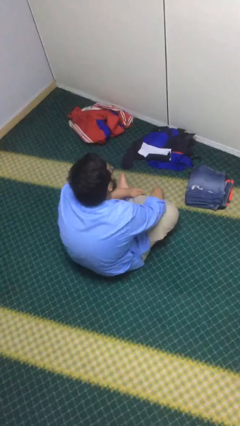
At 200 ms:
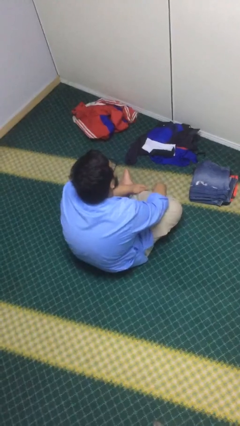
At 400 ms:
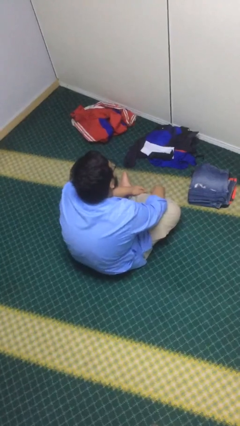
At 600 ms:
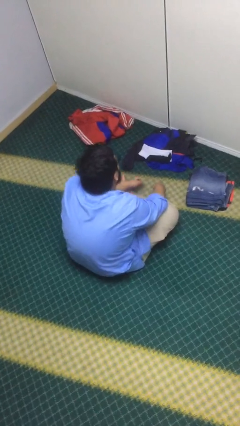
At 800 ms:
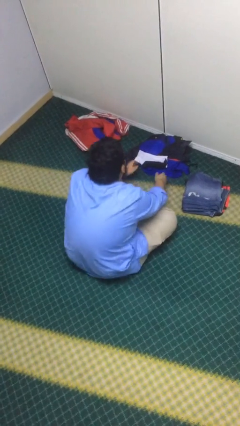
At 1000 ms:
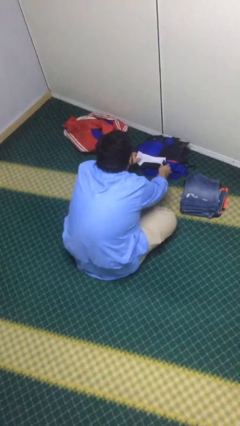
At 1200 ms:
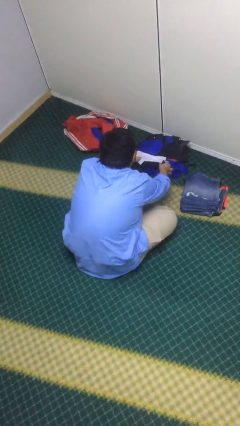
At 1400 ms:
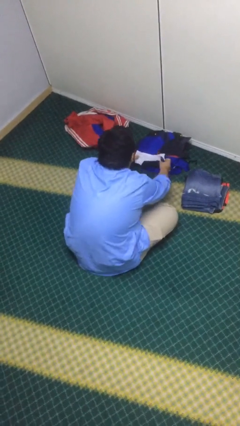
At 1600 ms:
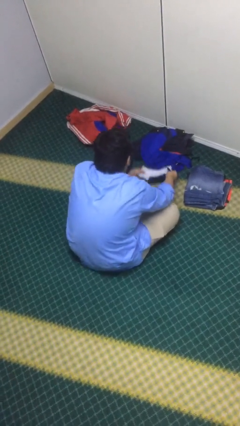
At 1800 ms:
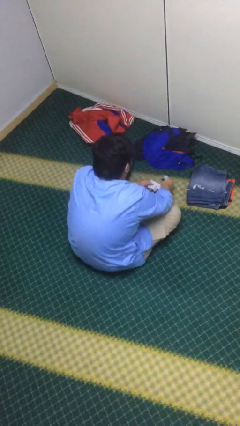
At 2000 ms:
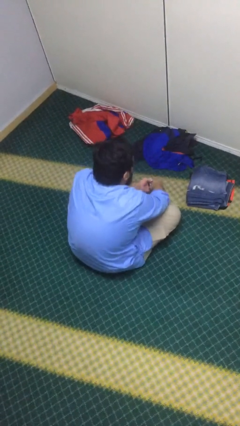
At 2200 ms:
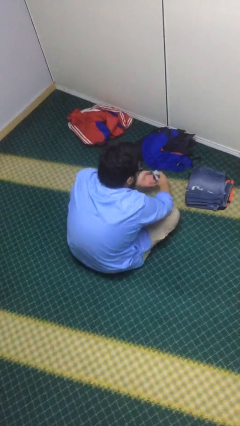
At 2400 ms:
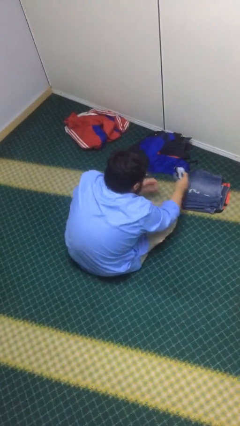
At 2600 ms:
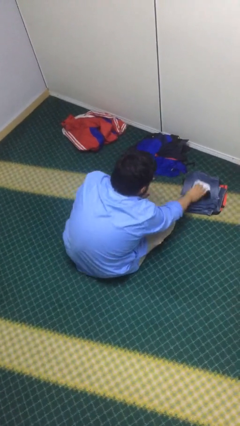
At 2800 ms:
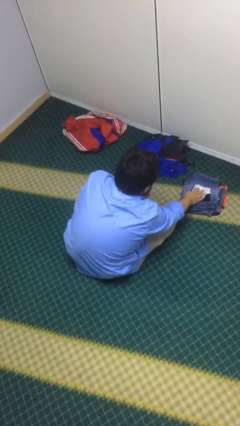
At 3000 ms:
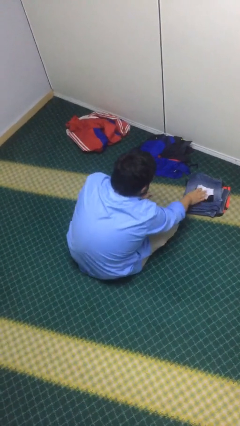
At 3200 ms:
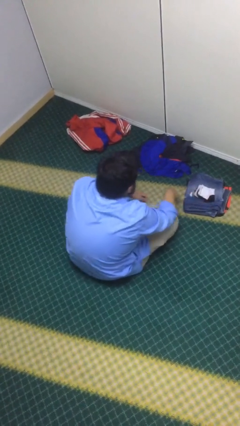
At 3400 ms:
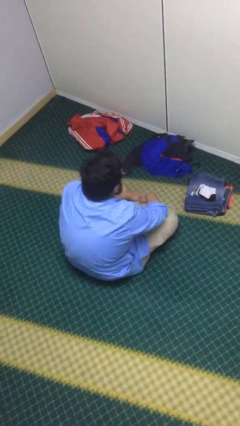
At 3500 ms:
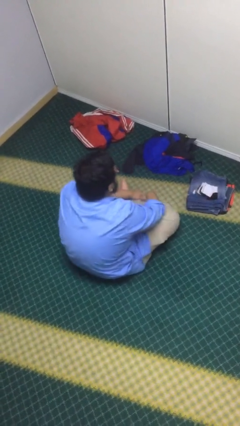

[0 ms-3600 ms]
person folds socks

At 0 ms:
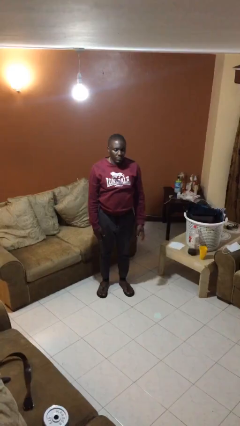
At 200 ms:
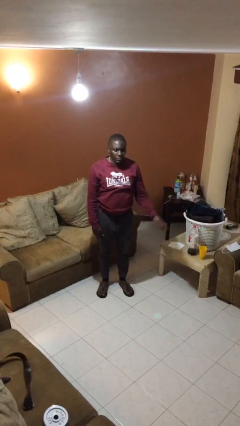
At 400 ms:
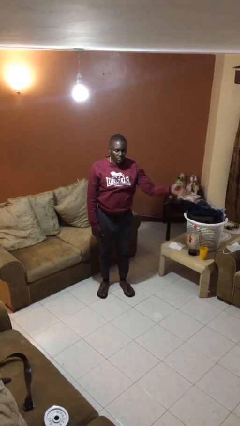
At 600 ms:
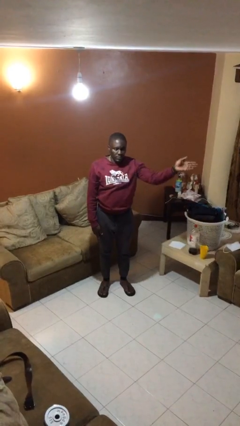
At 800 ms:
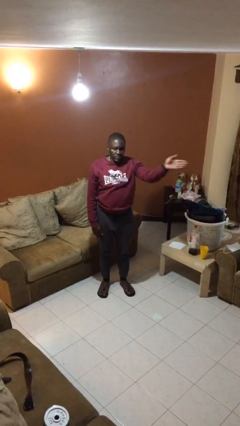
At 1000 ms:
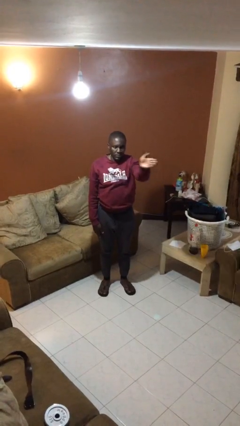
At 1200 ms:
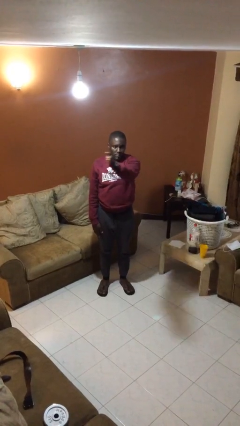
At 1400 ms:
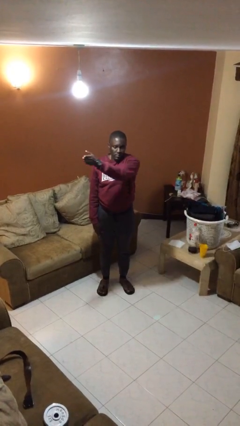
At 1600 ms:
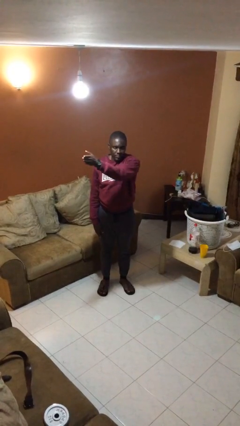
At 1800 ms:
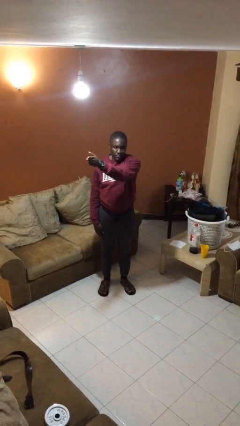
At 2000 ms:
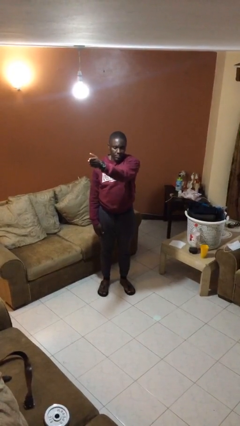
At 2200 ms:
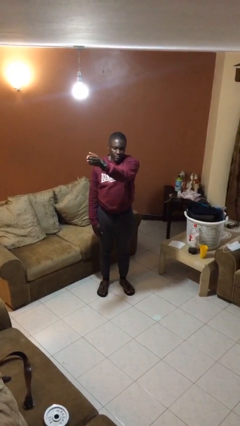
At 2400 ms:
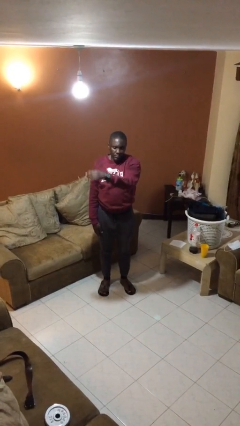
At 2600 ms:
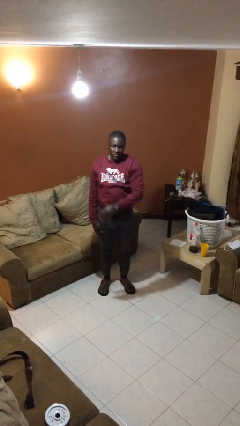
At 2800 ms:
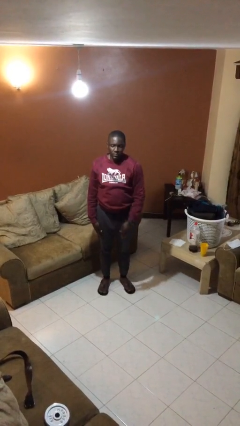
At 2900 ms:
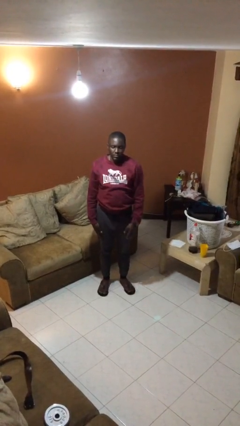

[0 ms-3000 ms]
person gestures swipe right

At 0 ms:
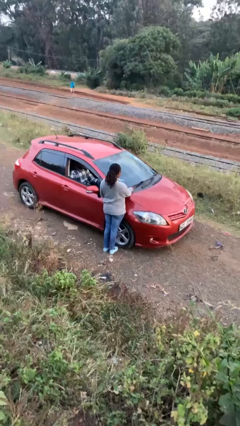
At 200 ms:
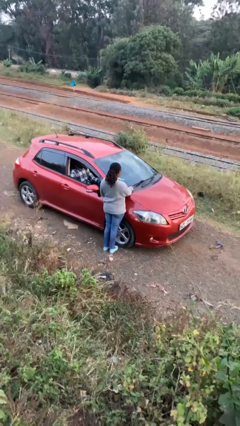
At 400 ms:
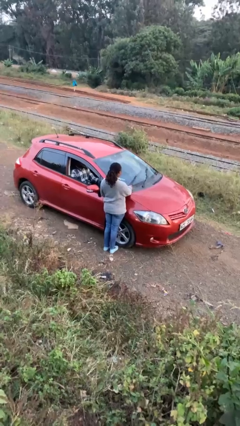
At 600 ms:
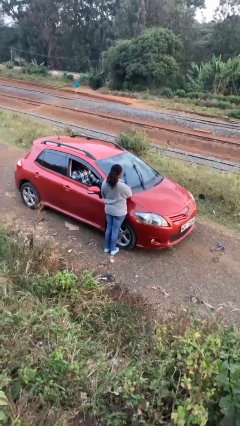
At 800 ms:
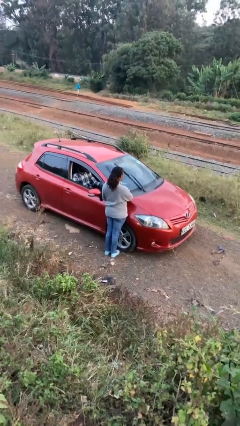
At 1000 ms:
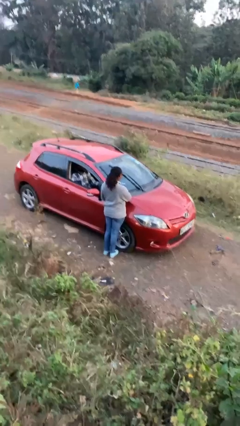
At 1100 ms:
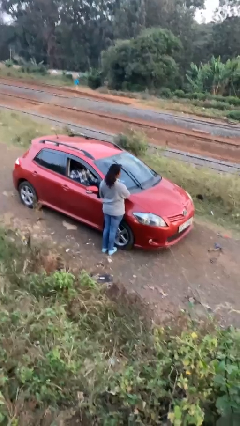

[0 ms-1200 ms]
person flips up car wipers

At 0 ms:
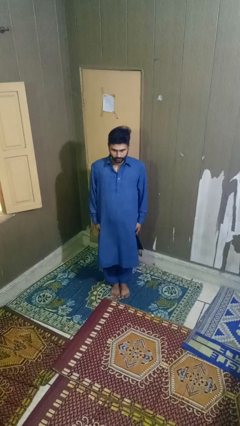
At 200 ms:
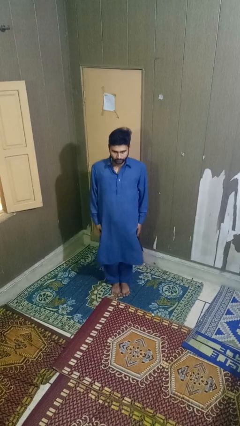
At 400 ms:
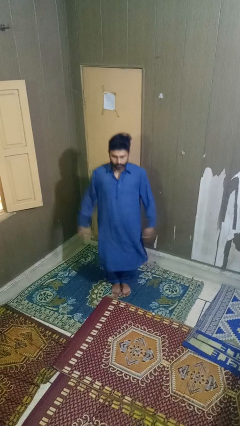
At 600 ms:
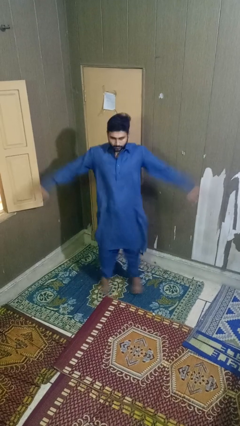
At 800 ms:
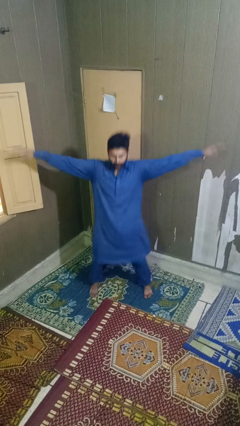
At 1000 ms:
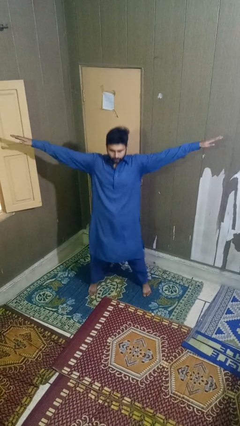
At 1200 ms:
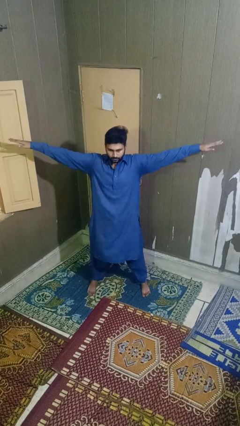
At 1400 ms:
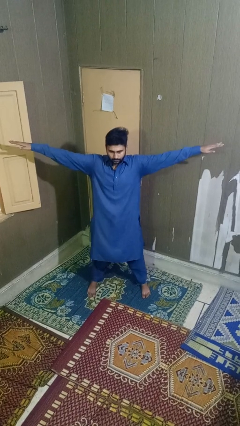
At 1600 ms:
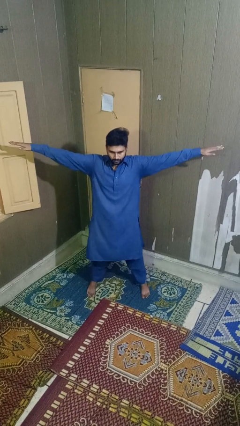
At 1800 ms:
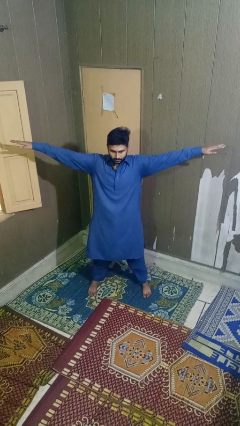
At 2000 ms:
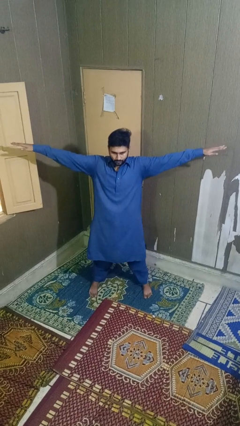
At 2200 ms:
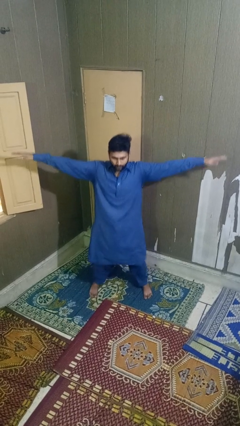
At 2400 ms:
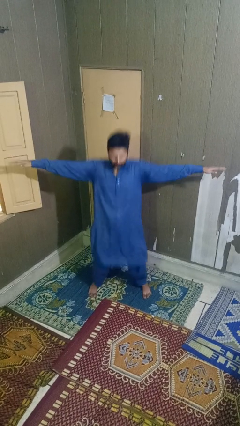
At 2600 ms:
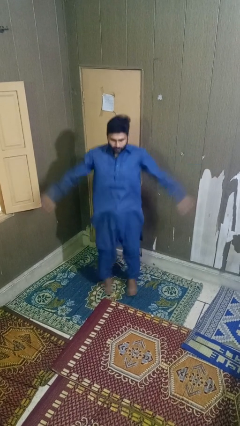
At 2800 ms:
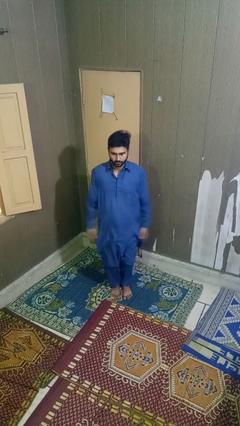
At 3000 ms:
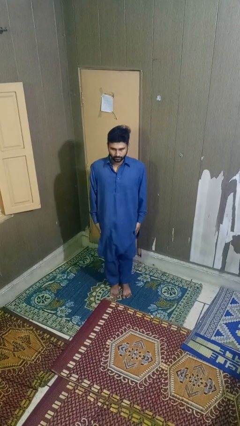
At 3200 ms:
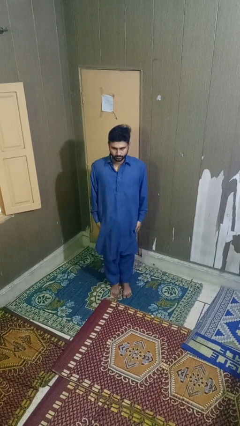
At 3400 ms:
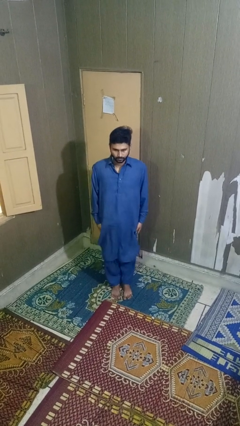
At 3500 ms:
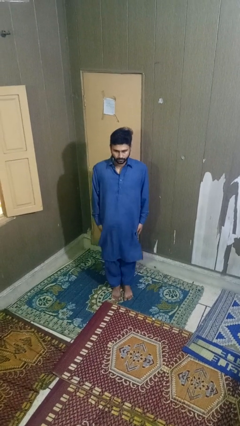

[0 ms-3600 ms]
person exercises with jumping jacks

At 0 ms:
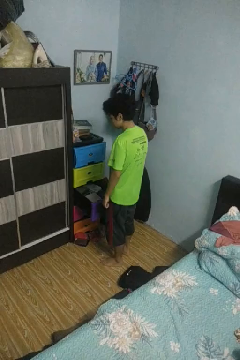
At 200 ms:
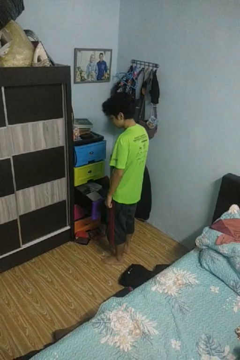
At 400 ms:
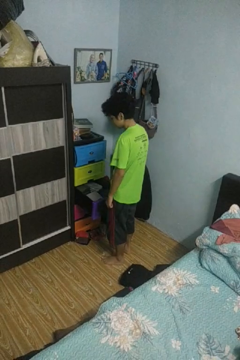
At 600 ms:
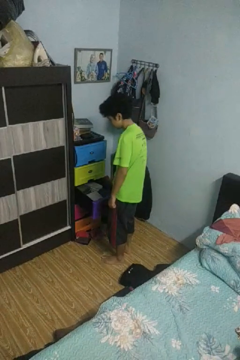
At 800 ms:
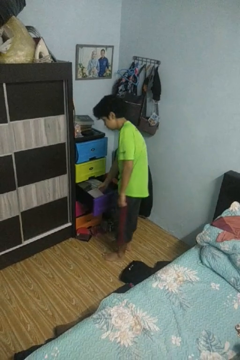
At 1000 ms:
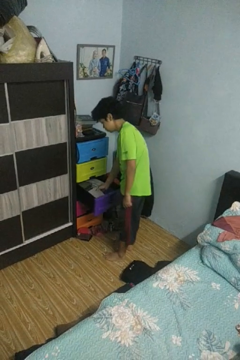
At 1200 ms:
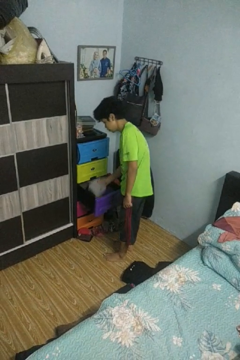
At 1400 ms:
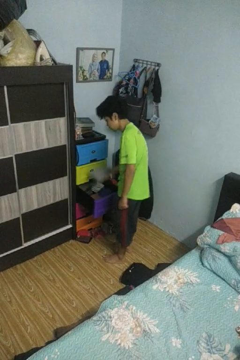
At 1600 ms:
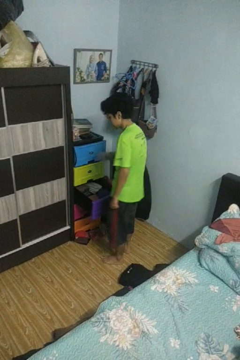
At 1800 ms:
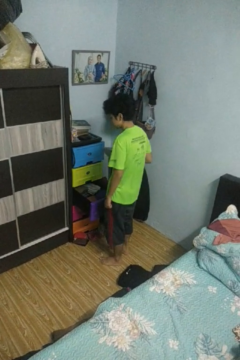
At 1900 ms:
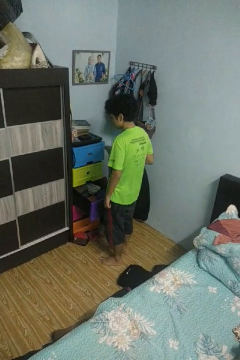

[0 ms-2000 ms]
person takes clothes from dresser

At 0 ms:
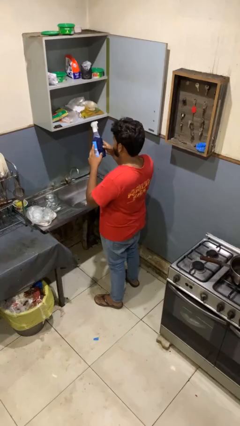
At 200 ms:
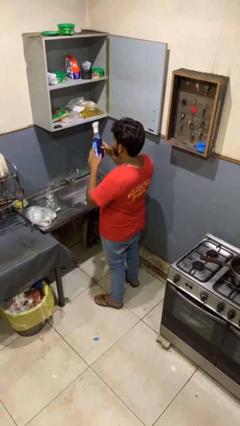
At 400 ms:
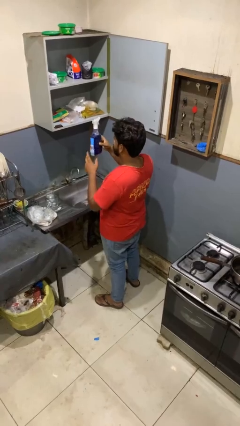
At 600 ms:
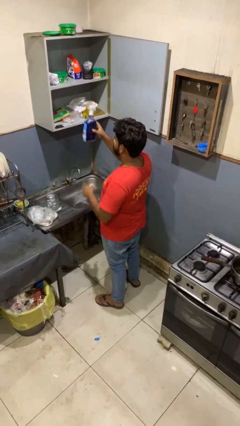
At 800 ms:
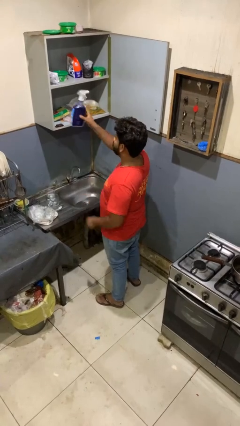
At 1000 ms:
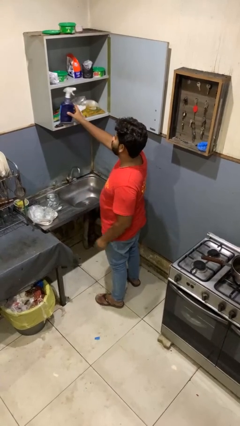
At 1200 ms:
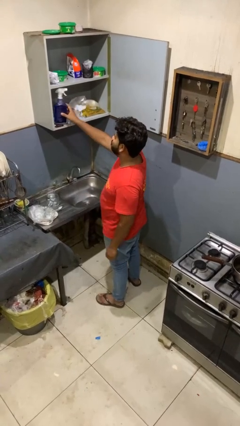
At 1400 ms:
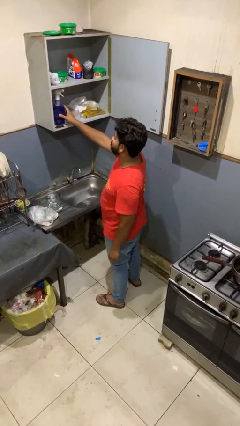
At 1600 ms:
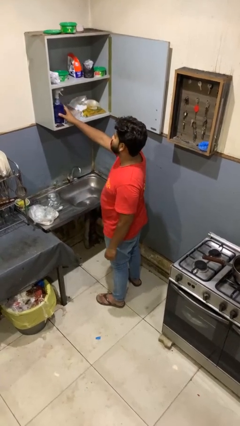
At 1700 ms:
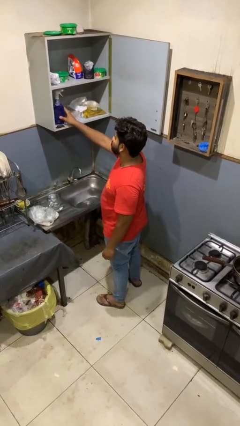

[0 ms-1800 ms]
person puts down object into cabinet

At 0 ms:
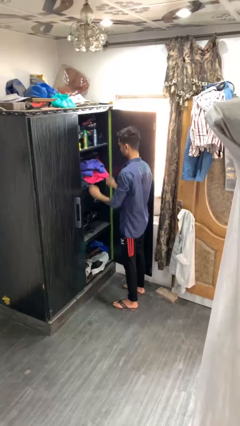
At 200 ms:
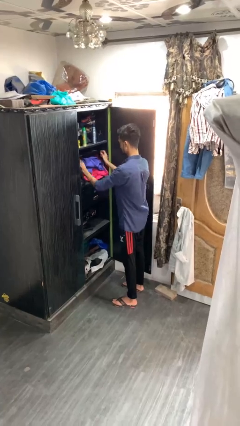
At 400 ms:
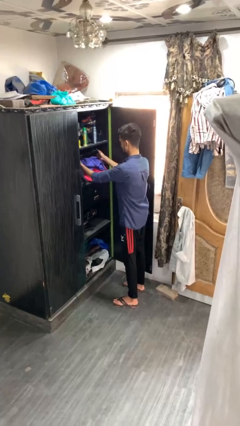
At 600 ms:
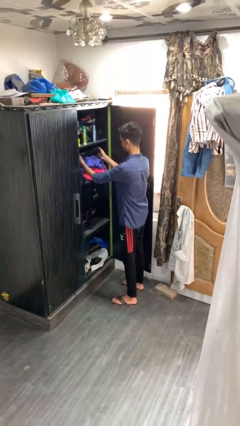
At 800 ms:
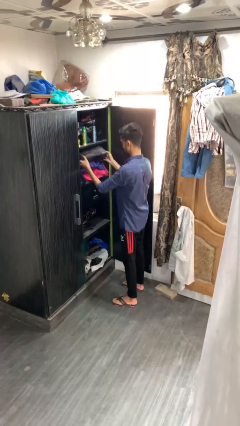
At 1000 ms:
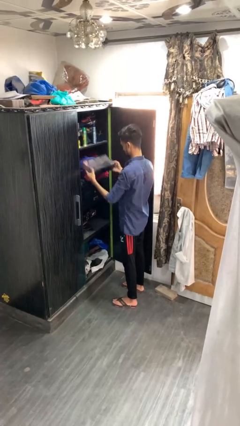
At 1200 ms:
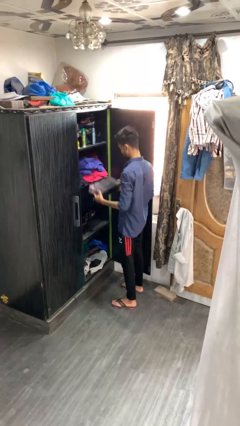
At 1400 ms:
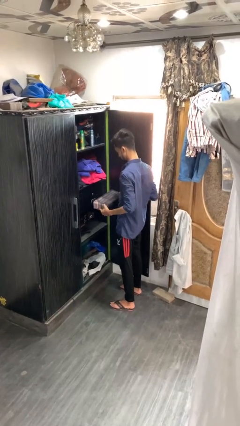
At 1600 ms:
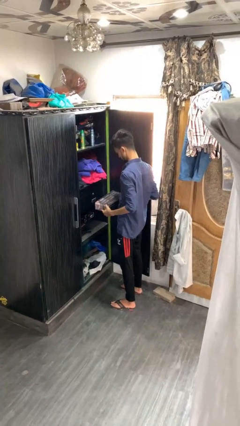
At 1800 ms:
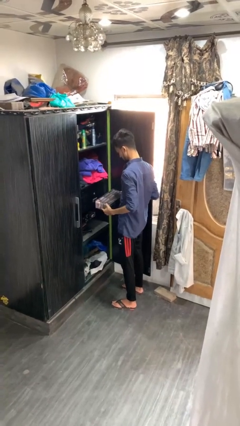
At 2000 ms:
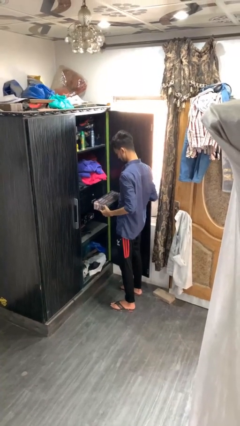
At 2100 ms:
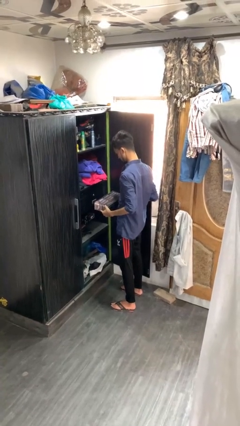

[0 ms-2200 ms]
person picks up object from cabinet

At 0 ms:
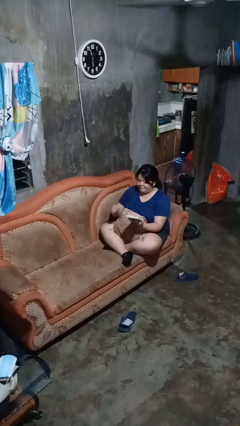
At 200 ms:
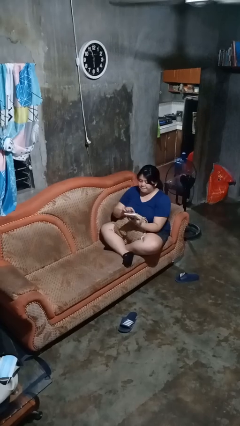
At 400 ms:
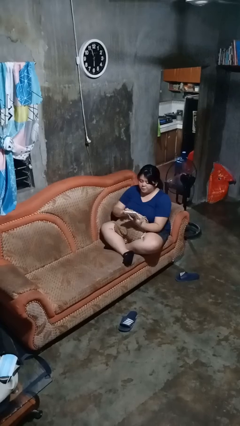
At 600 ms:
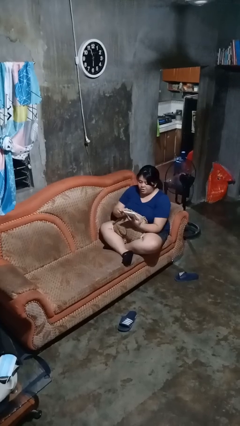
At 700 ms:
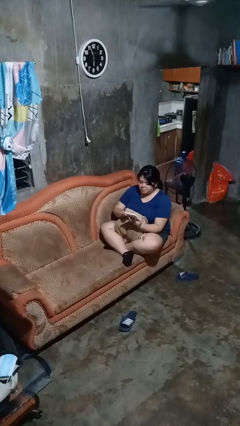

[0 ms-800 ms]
person interacts with tablet
